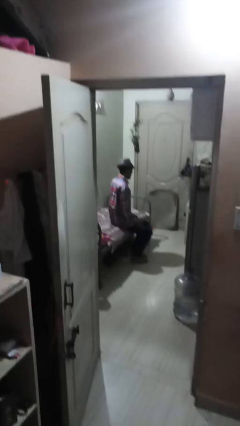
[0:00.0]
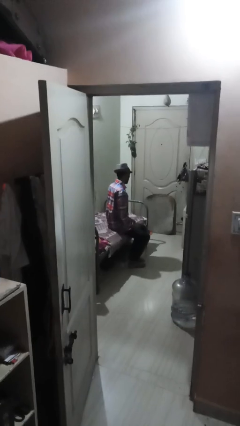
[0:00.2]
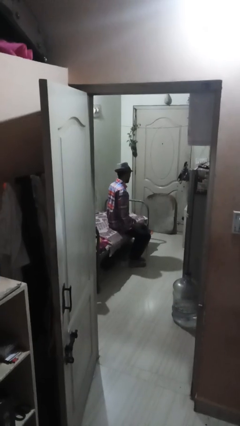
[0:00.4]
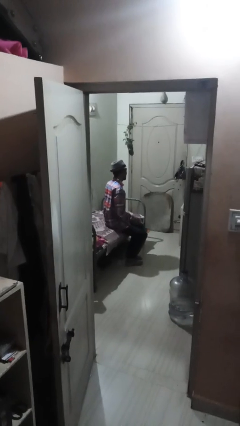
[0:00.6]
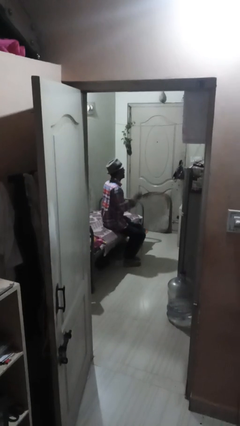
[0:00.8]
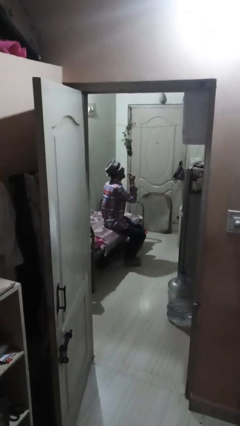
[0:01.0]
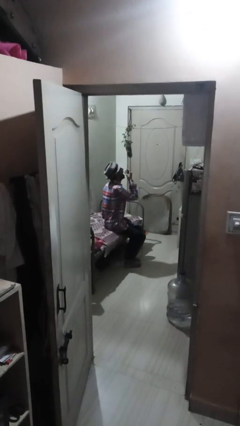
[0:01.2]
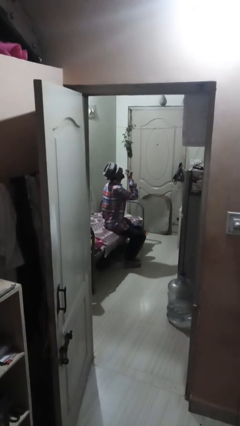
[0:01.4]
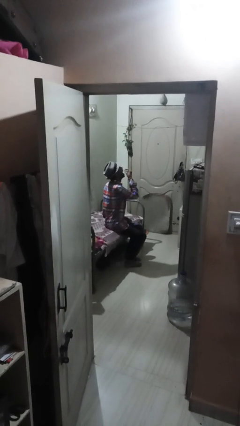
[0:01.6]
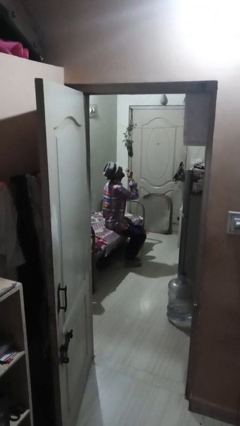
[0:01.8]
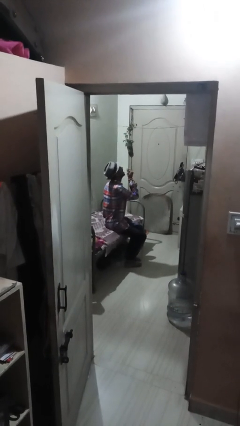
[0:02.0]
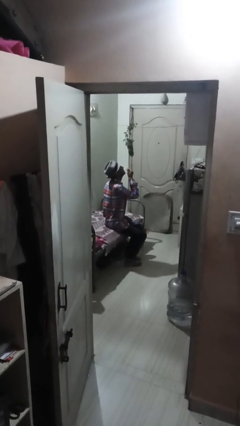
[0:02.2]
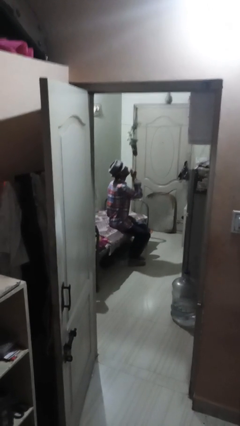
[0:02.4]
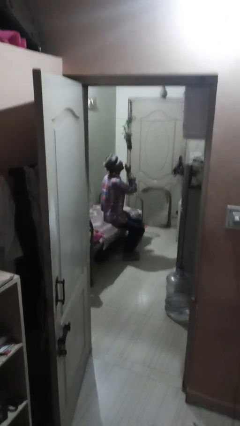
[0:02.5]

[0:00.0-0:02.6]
person yawns

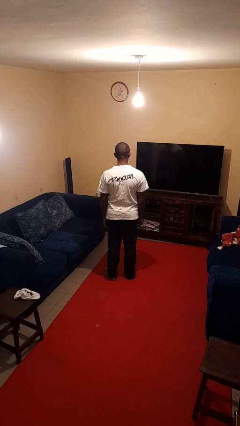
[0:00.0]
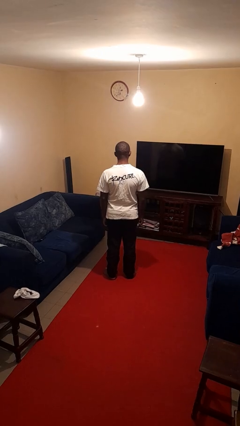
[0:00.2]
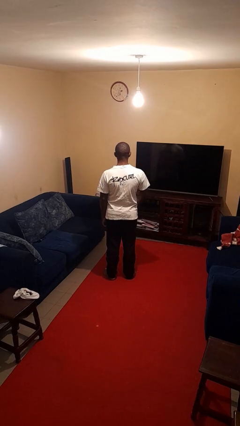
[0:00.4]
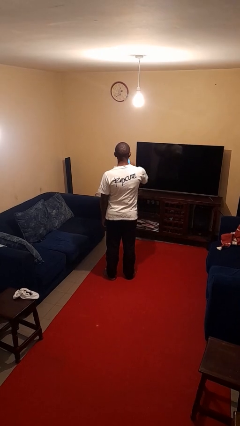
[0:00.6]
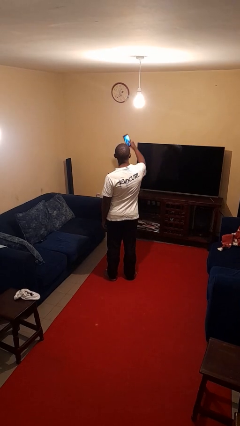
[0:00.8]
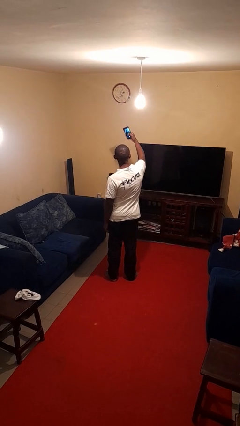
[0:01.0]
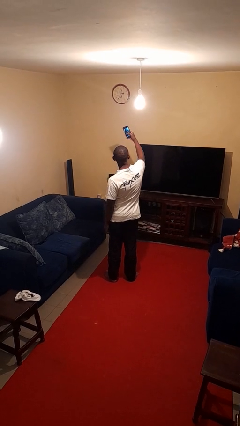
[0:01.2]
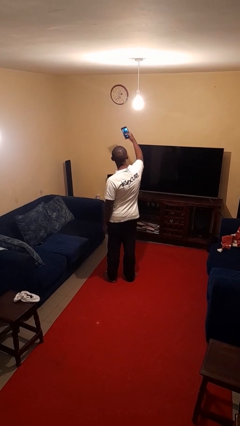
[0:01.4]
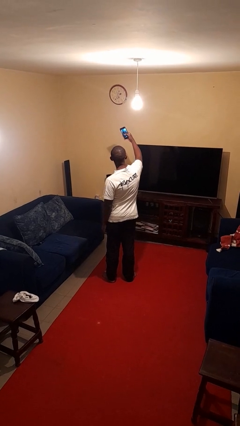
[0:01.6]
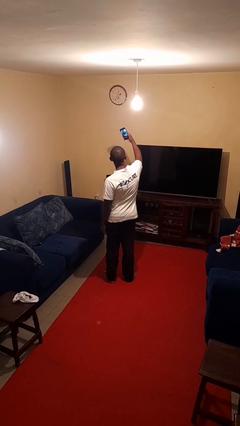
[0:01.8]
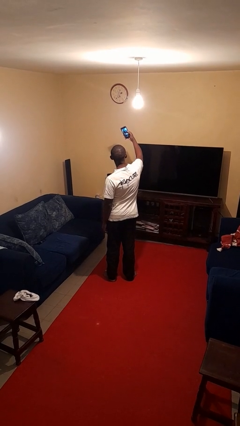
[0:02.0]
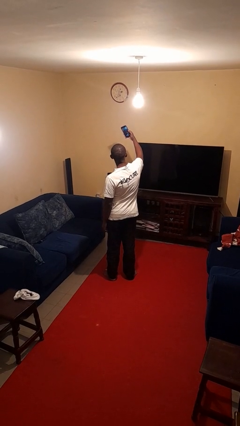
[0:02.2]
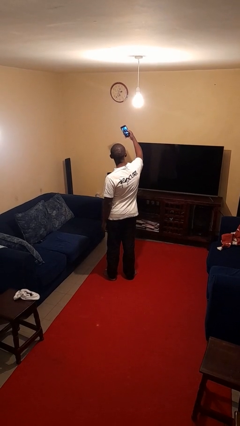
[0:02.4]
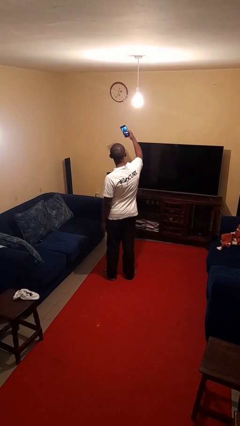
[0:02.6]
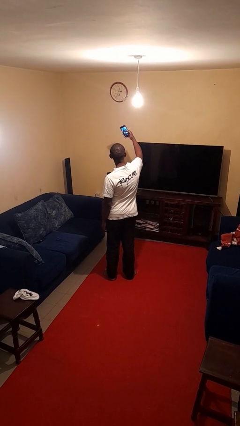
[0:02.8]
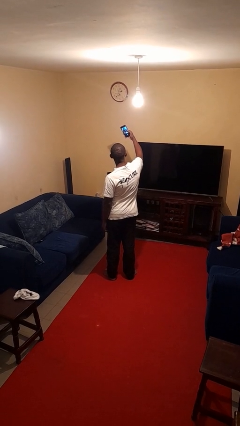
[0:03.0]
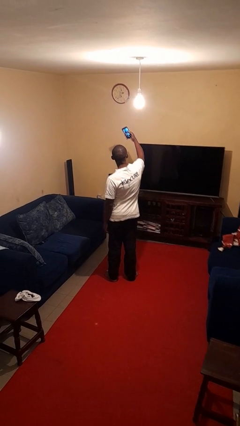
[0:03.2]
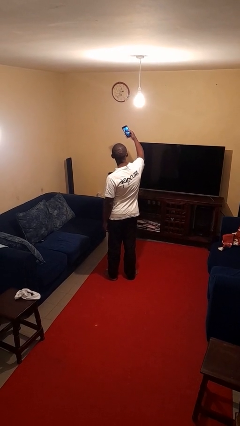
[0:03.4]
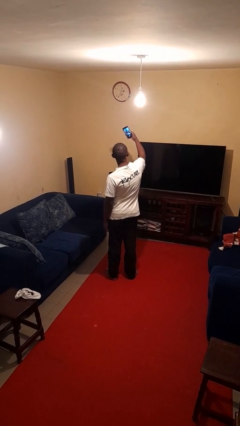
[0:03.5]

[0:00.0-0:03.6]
person takes selfie

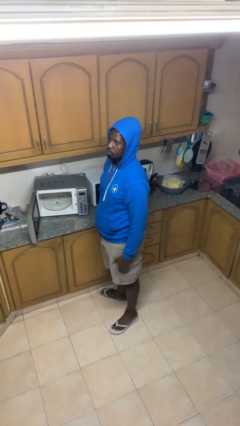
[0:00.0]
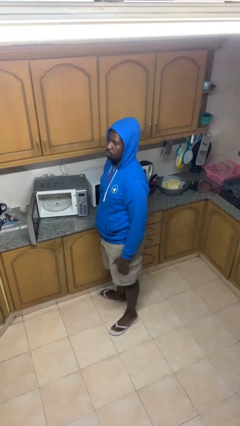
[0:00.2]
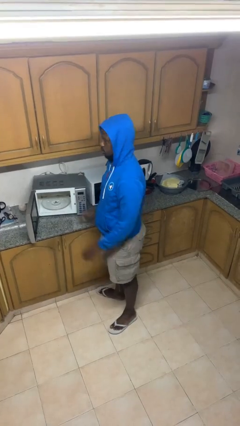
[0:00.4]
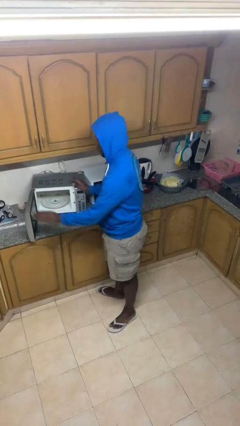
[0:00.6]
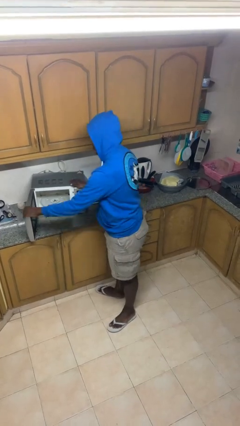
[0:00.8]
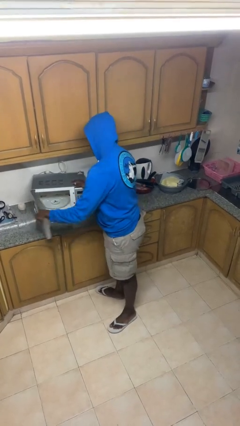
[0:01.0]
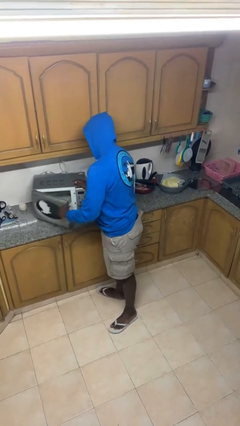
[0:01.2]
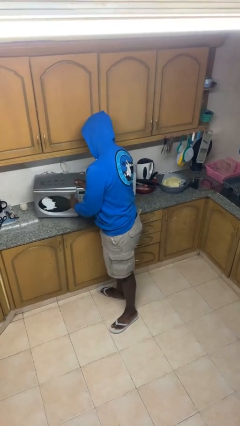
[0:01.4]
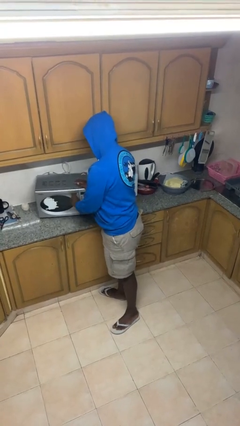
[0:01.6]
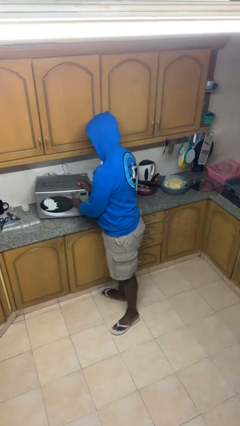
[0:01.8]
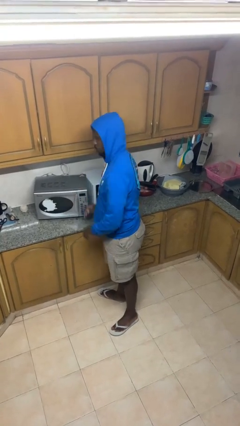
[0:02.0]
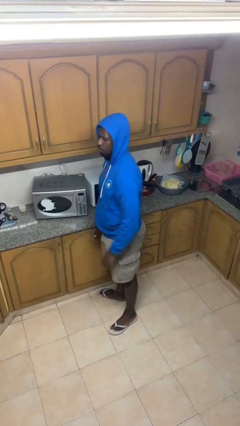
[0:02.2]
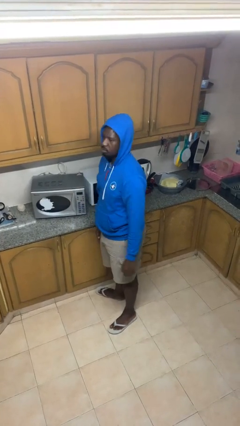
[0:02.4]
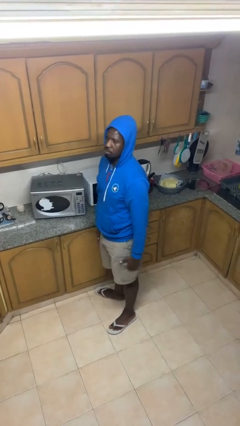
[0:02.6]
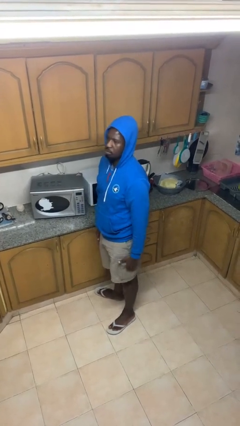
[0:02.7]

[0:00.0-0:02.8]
person closes microwave

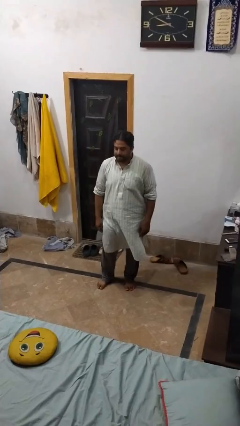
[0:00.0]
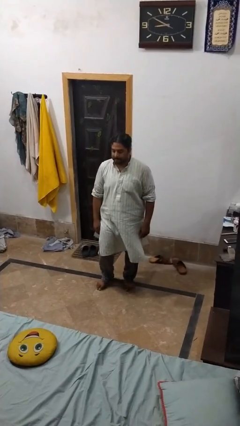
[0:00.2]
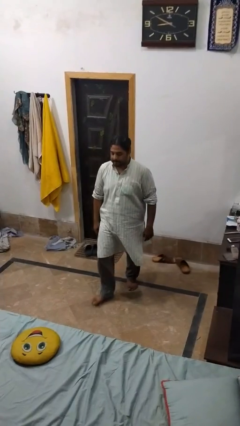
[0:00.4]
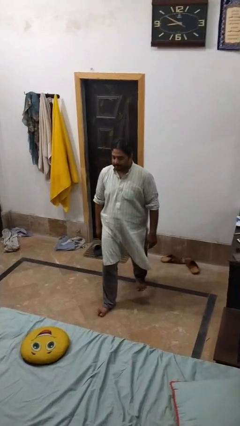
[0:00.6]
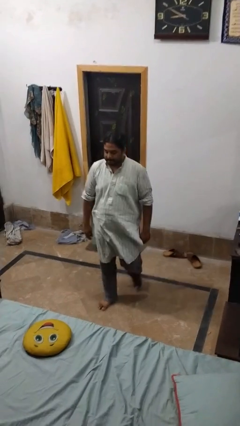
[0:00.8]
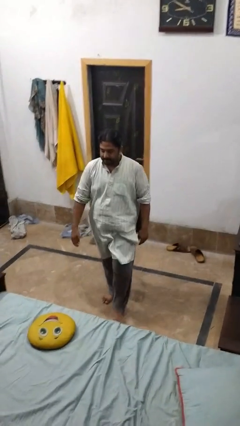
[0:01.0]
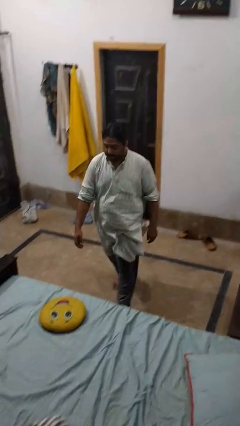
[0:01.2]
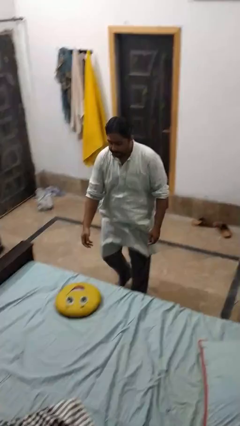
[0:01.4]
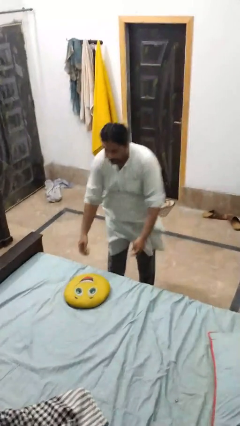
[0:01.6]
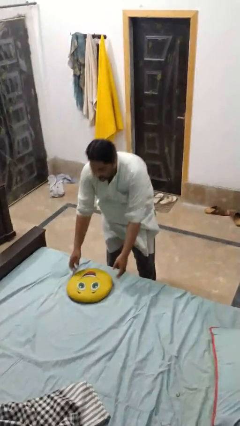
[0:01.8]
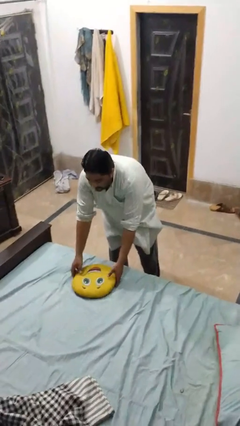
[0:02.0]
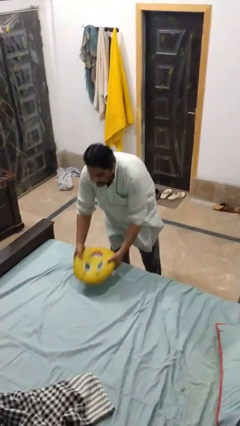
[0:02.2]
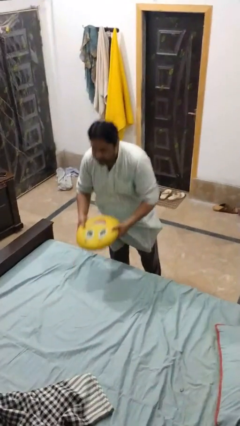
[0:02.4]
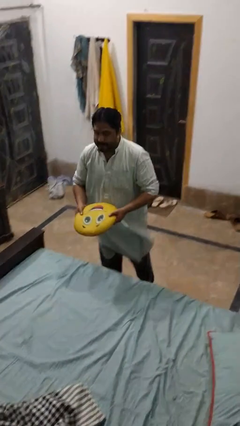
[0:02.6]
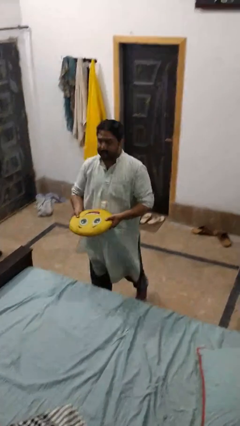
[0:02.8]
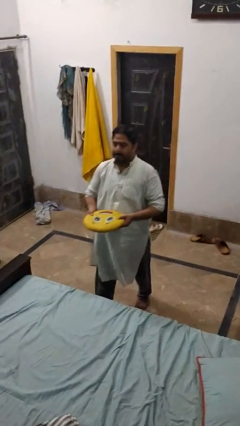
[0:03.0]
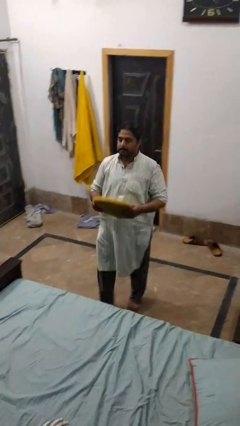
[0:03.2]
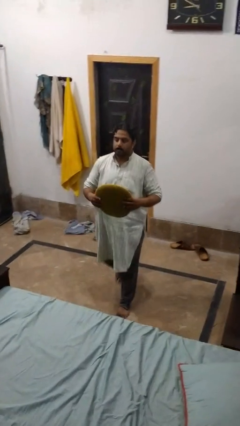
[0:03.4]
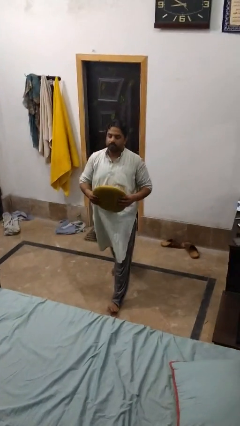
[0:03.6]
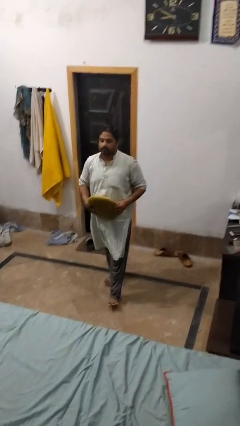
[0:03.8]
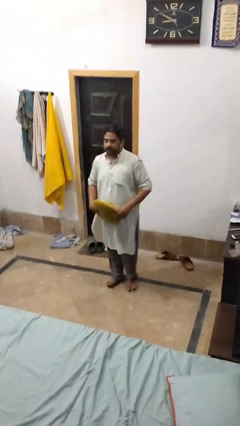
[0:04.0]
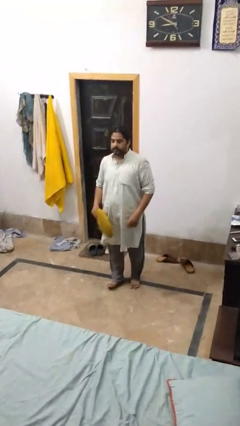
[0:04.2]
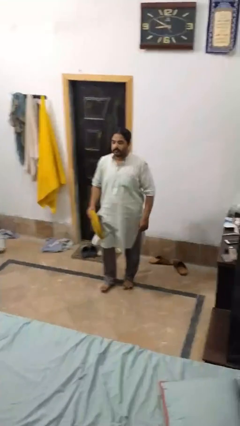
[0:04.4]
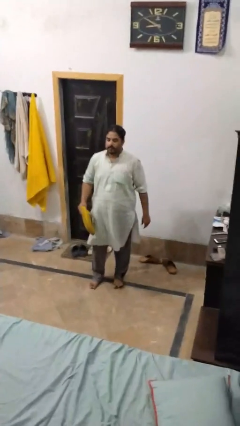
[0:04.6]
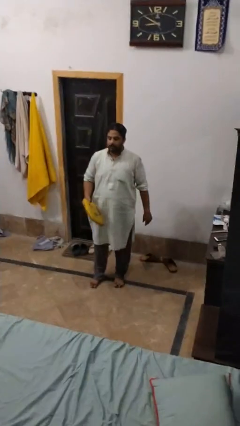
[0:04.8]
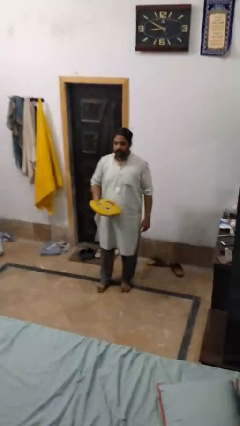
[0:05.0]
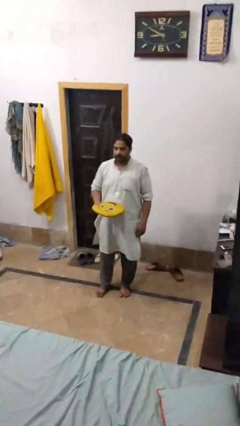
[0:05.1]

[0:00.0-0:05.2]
person picks up object from bed

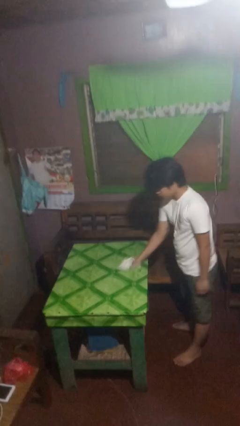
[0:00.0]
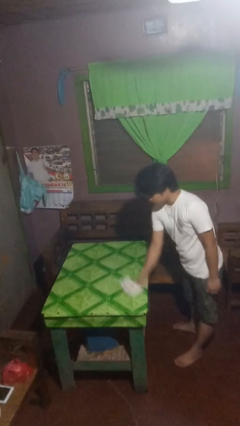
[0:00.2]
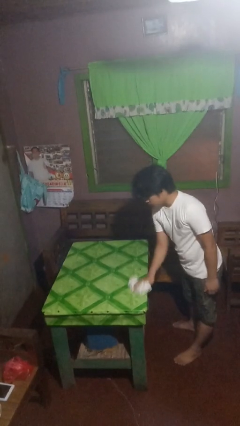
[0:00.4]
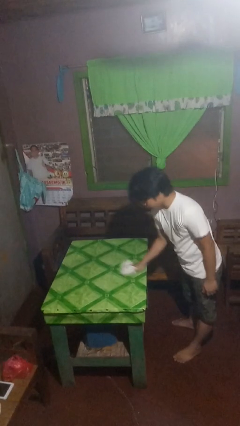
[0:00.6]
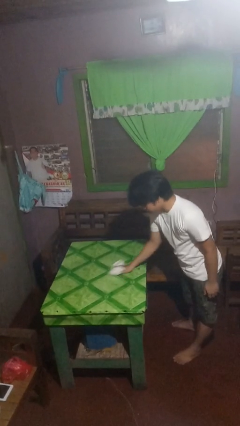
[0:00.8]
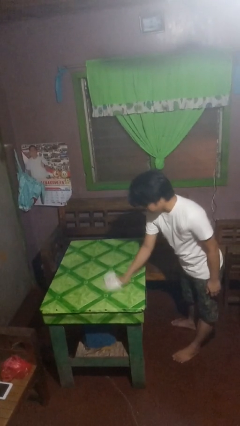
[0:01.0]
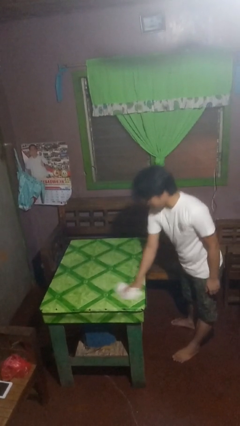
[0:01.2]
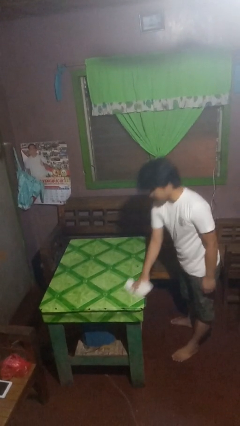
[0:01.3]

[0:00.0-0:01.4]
person cleans table with rag

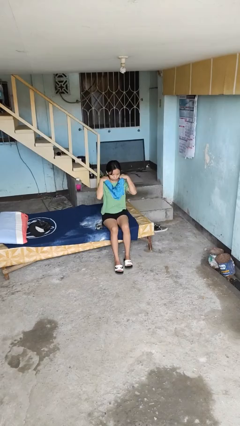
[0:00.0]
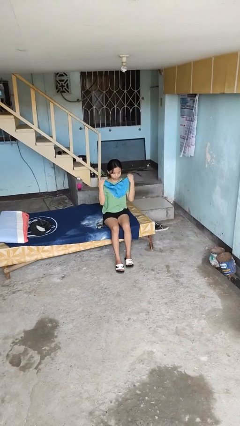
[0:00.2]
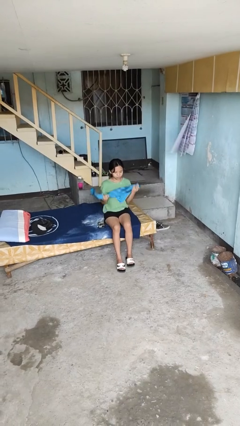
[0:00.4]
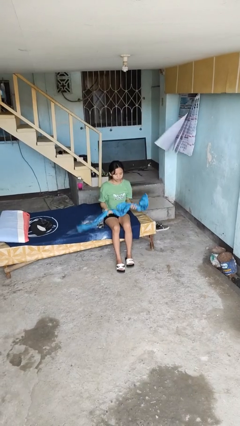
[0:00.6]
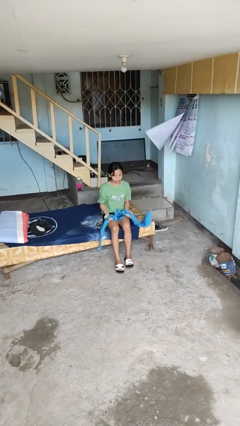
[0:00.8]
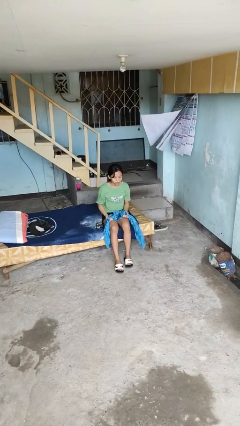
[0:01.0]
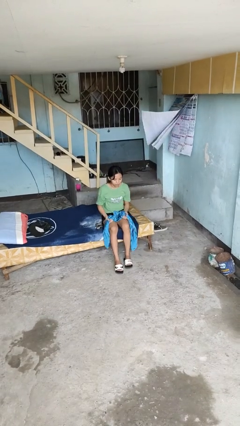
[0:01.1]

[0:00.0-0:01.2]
person takes off scarf

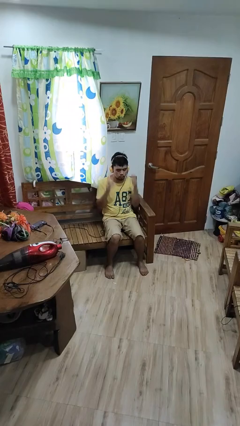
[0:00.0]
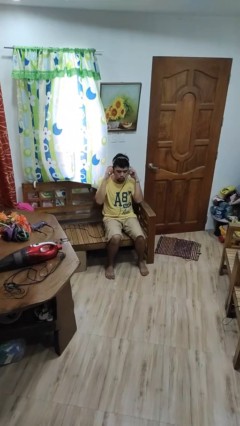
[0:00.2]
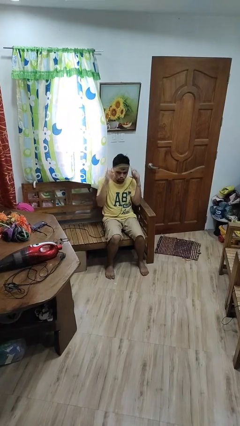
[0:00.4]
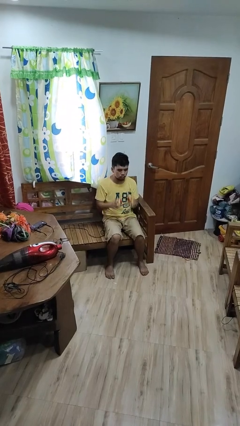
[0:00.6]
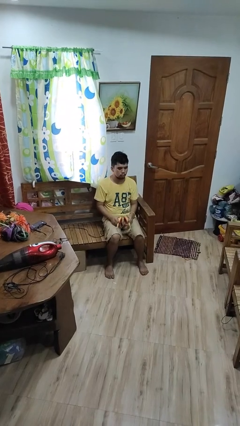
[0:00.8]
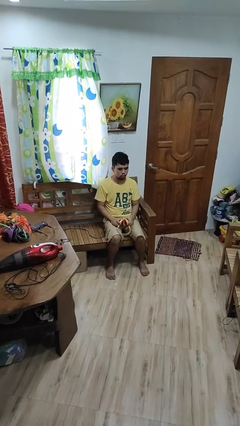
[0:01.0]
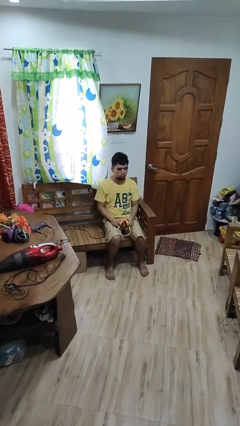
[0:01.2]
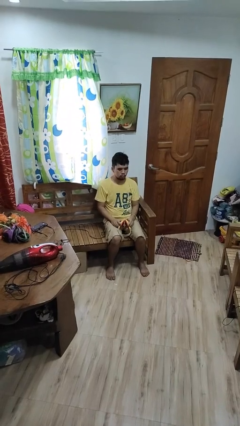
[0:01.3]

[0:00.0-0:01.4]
person takes off headphones
